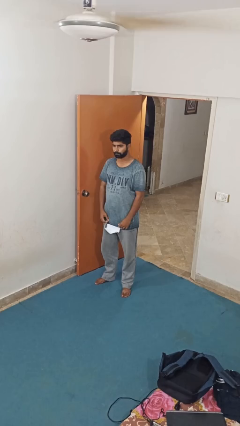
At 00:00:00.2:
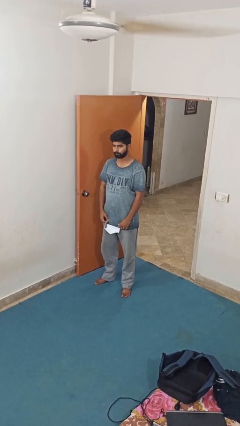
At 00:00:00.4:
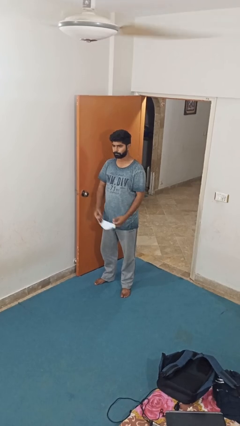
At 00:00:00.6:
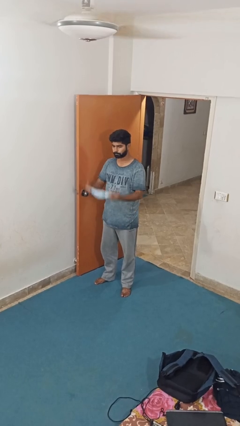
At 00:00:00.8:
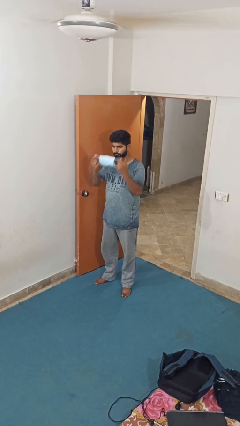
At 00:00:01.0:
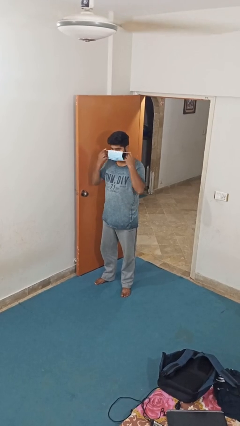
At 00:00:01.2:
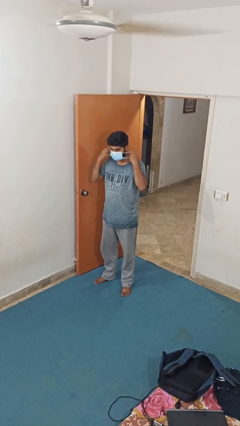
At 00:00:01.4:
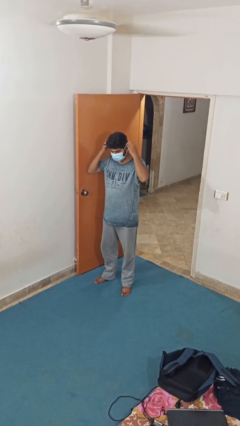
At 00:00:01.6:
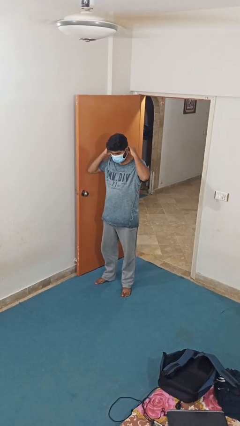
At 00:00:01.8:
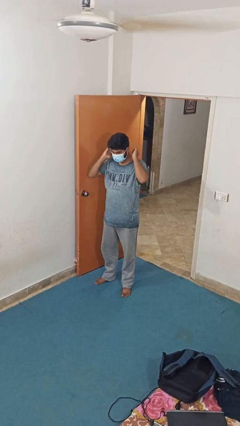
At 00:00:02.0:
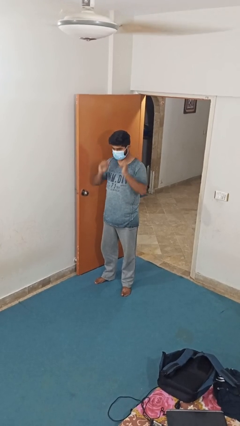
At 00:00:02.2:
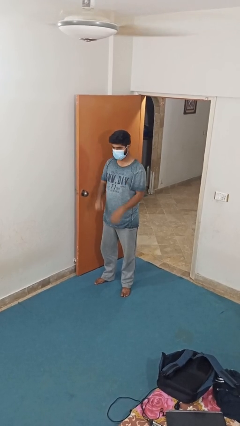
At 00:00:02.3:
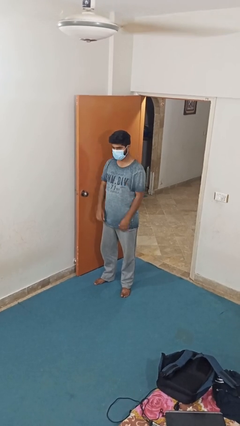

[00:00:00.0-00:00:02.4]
person puts on facemask

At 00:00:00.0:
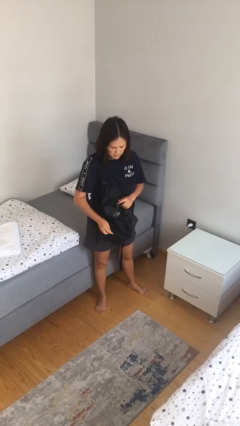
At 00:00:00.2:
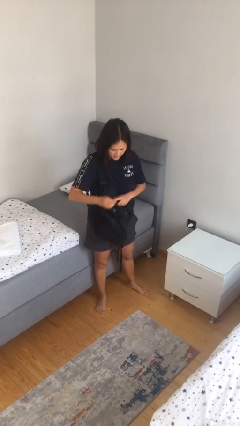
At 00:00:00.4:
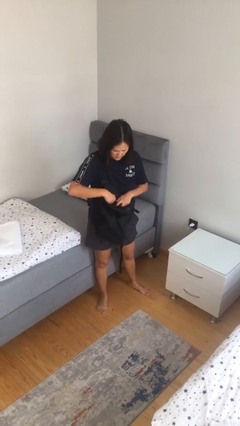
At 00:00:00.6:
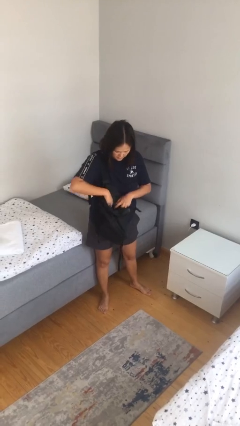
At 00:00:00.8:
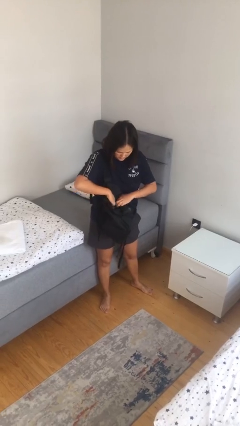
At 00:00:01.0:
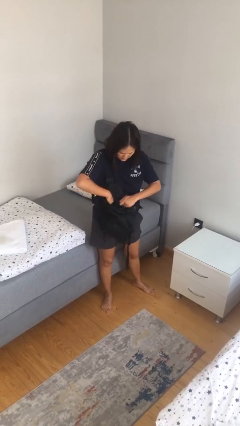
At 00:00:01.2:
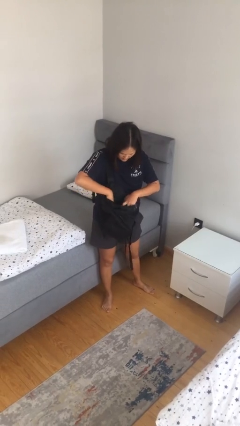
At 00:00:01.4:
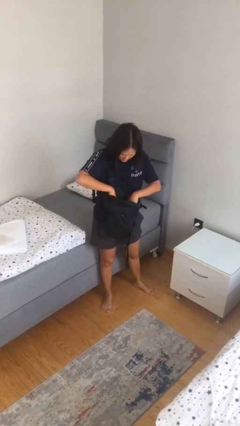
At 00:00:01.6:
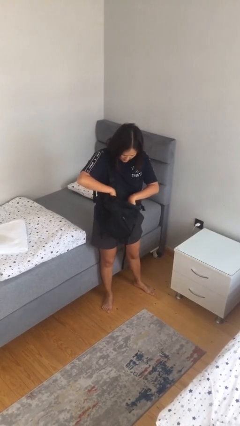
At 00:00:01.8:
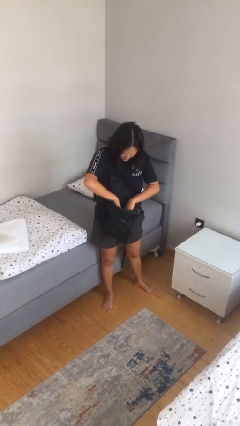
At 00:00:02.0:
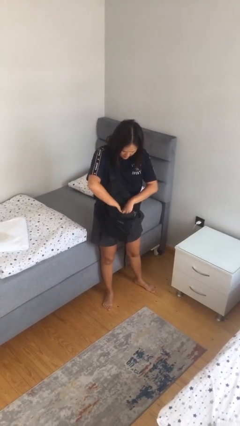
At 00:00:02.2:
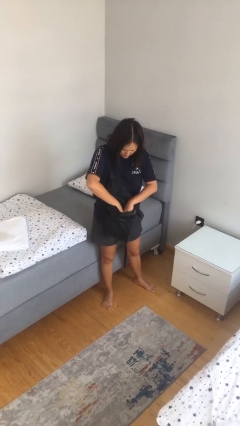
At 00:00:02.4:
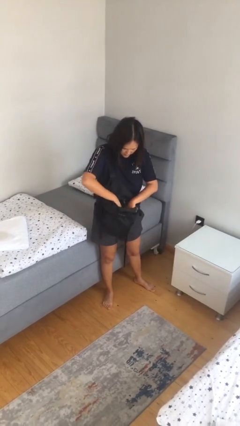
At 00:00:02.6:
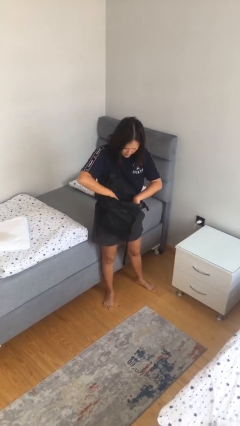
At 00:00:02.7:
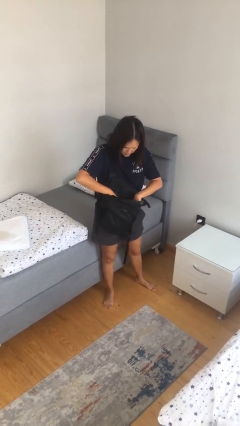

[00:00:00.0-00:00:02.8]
person searches in backpack

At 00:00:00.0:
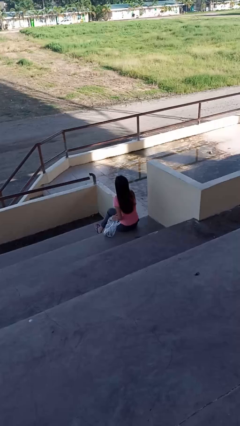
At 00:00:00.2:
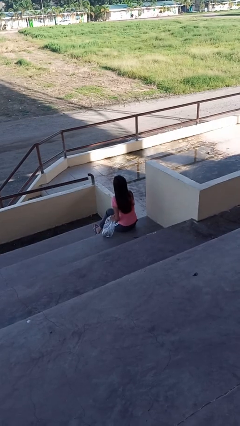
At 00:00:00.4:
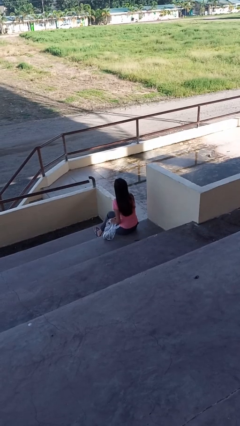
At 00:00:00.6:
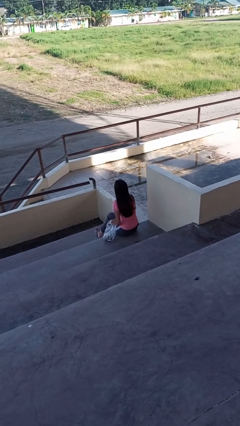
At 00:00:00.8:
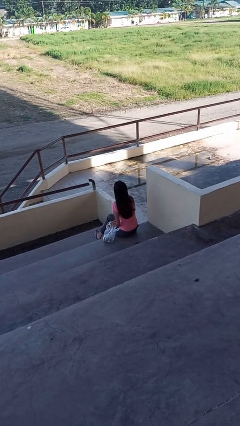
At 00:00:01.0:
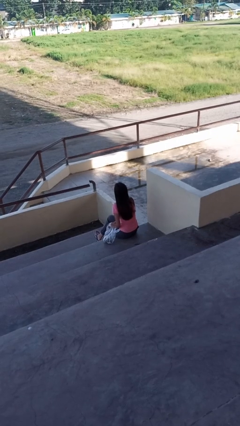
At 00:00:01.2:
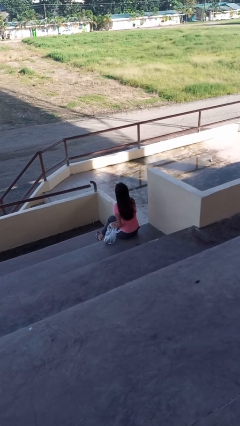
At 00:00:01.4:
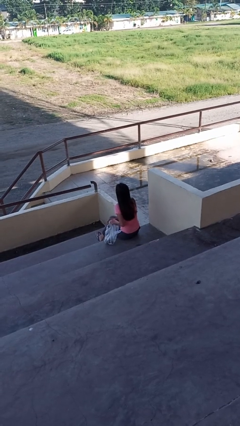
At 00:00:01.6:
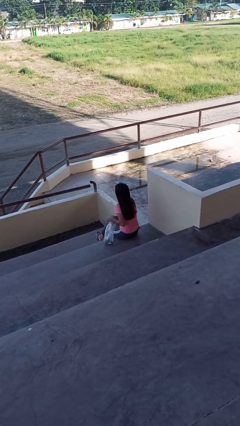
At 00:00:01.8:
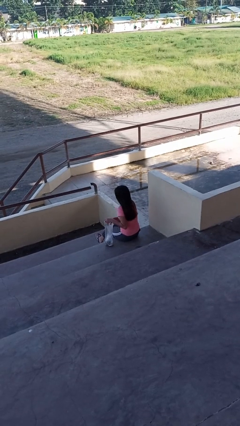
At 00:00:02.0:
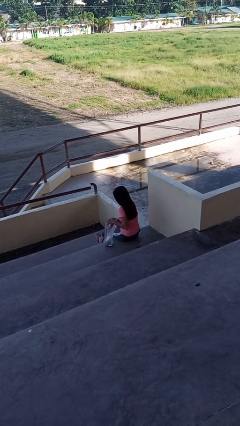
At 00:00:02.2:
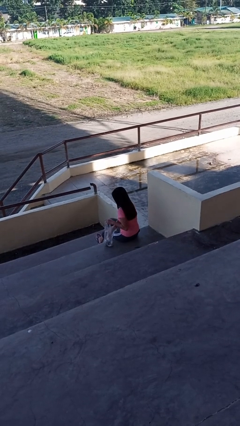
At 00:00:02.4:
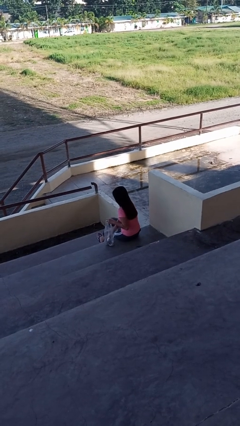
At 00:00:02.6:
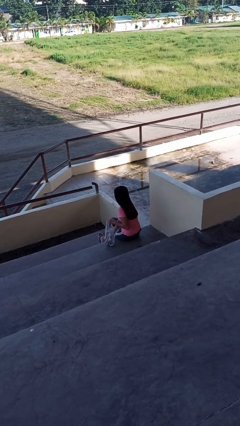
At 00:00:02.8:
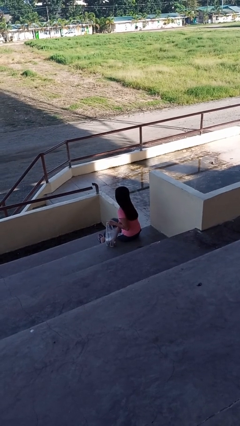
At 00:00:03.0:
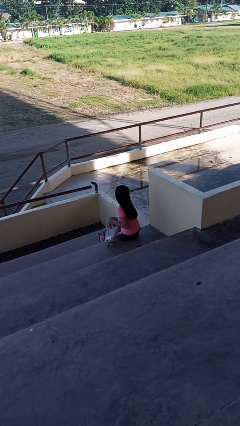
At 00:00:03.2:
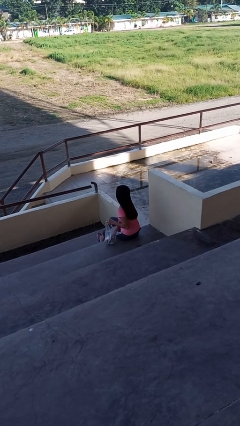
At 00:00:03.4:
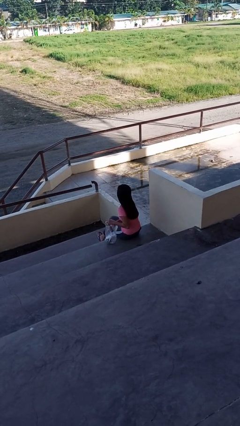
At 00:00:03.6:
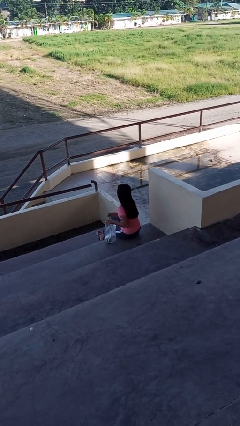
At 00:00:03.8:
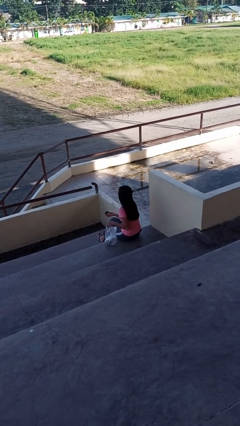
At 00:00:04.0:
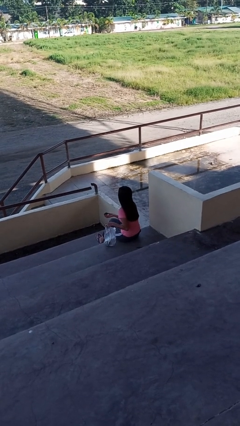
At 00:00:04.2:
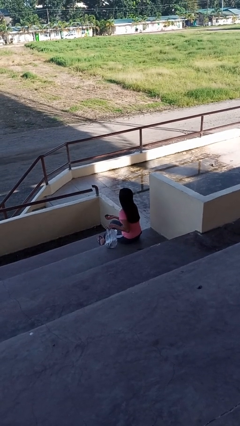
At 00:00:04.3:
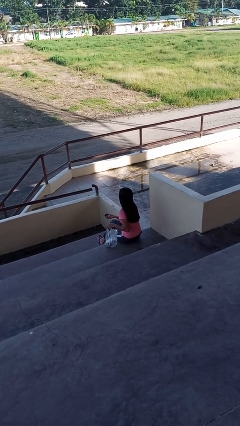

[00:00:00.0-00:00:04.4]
person takes object from bag

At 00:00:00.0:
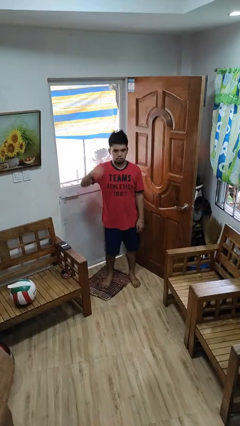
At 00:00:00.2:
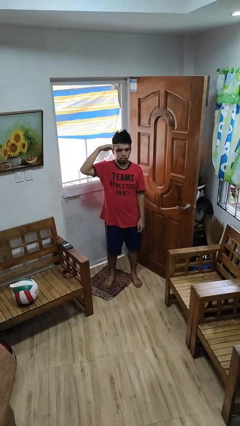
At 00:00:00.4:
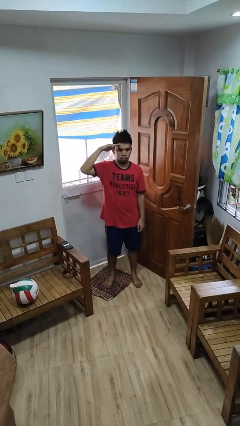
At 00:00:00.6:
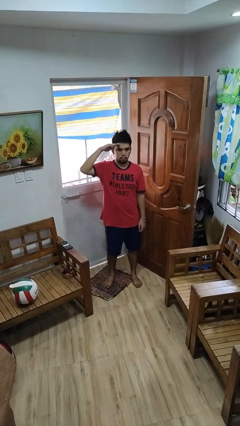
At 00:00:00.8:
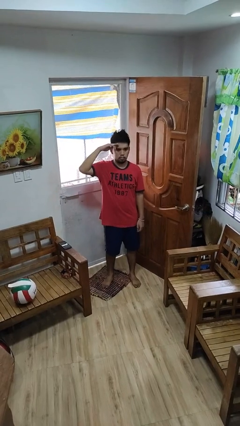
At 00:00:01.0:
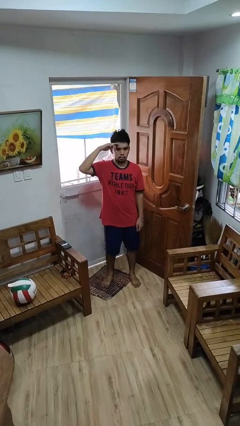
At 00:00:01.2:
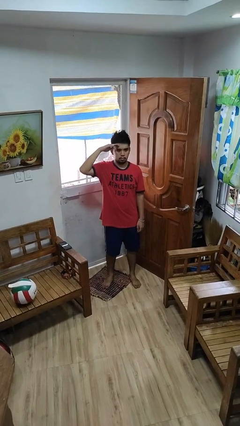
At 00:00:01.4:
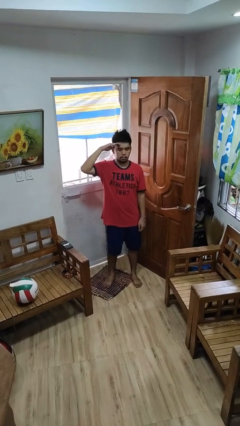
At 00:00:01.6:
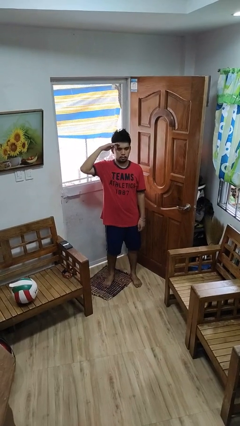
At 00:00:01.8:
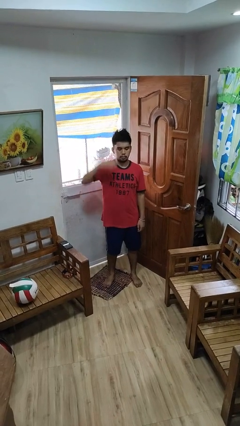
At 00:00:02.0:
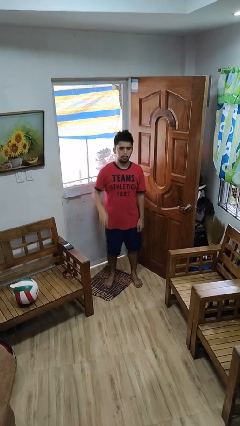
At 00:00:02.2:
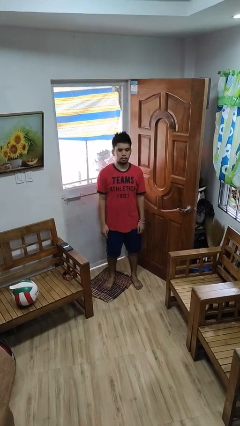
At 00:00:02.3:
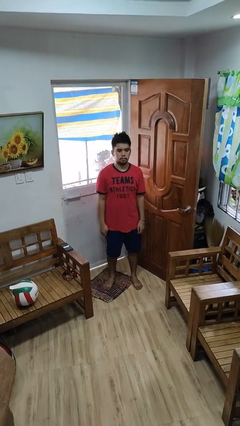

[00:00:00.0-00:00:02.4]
person salutes

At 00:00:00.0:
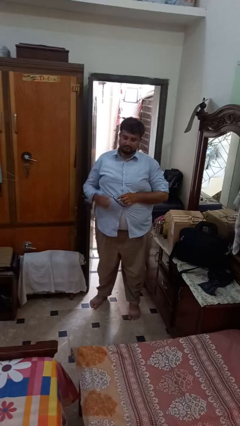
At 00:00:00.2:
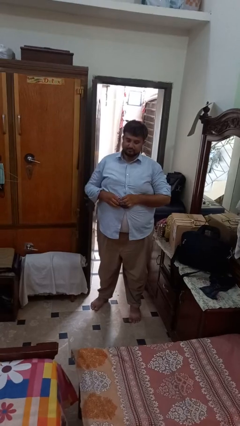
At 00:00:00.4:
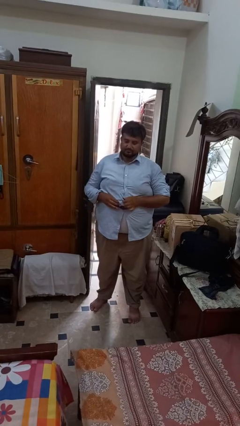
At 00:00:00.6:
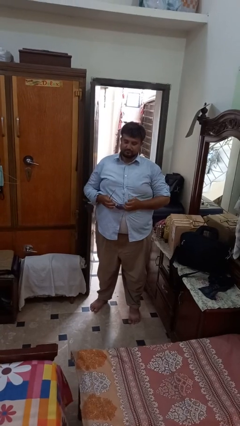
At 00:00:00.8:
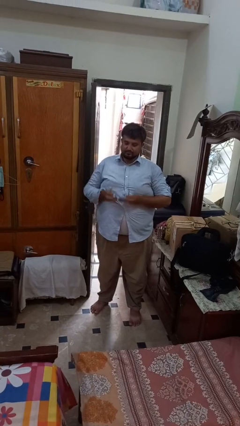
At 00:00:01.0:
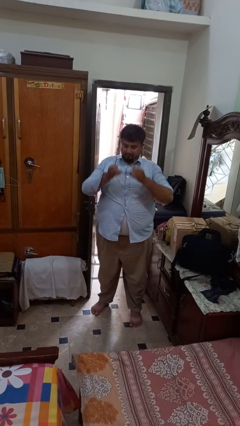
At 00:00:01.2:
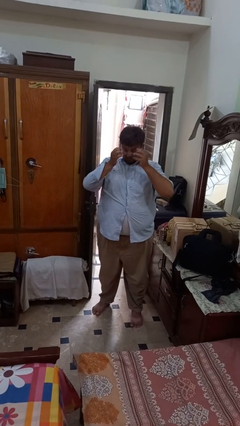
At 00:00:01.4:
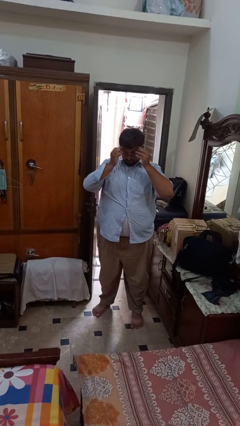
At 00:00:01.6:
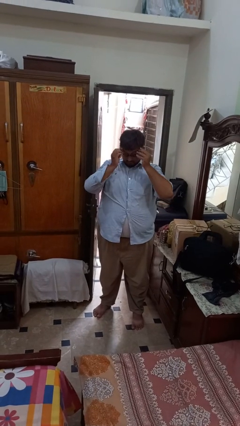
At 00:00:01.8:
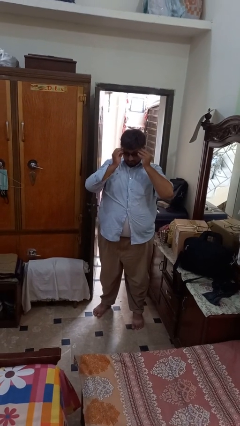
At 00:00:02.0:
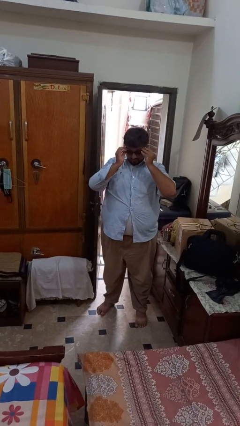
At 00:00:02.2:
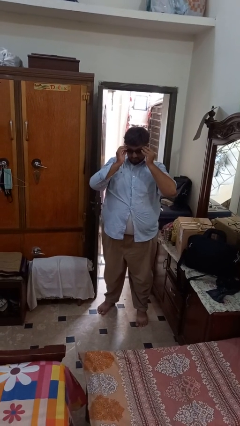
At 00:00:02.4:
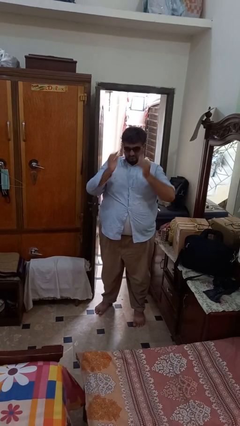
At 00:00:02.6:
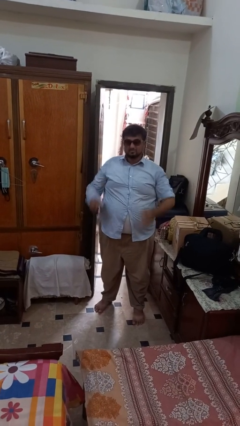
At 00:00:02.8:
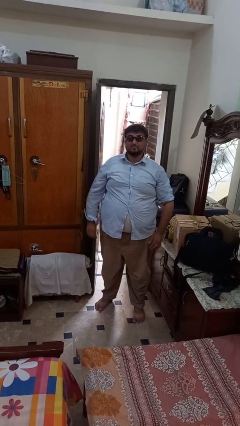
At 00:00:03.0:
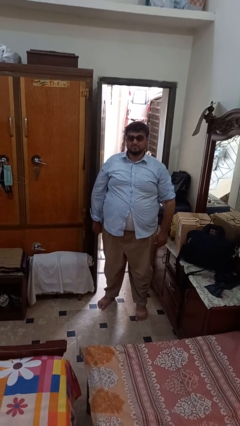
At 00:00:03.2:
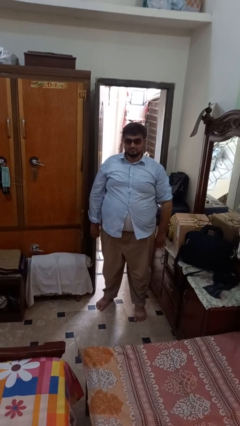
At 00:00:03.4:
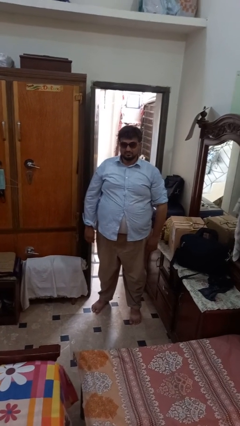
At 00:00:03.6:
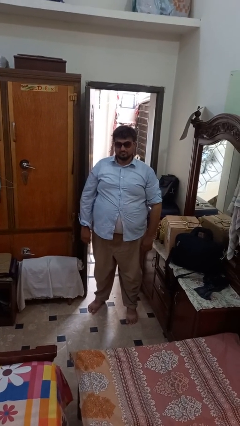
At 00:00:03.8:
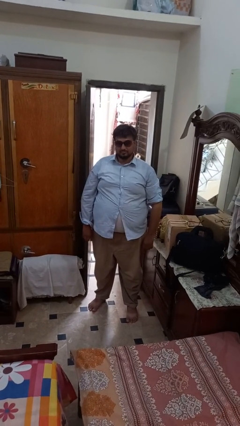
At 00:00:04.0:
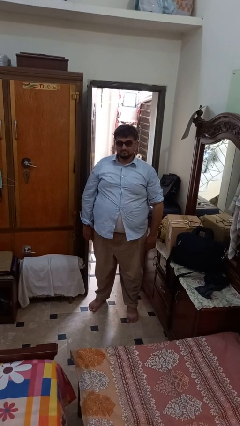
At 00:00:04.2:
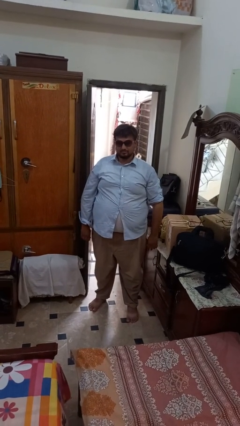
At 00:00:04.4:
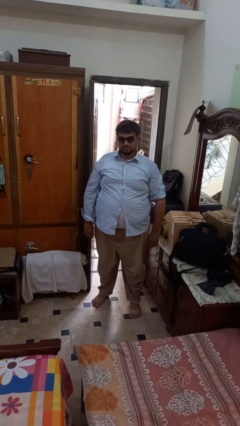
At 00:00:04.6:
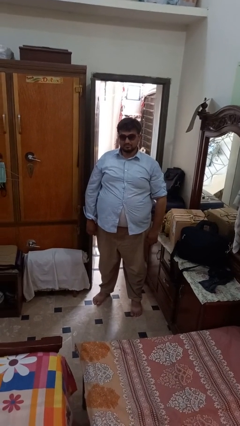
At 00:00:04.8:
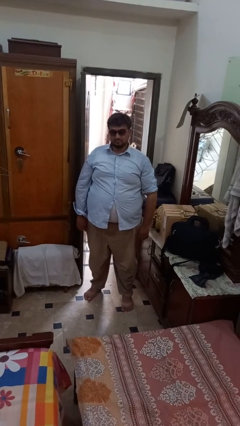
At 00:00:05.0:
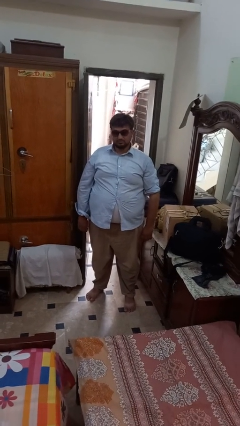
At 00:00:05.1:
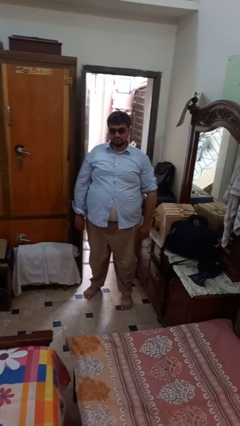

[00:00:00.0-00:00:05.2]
person puts on sunglasses
